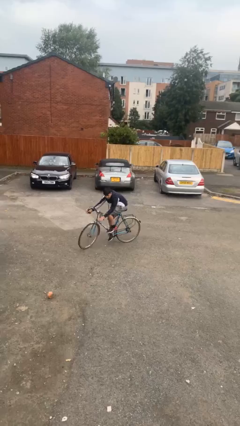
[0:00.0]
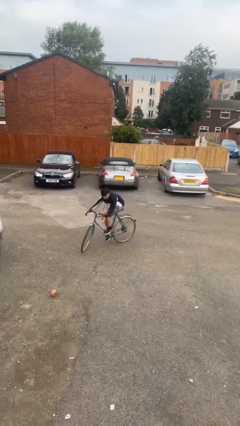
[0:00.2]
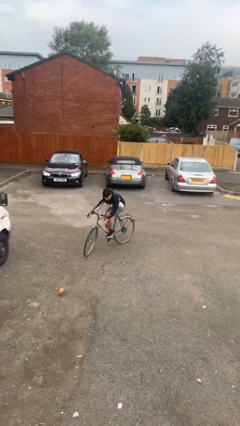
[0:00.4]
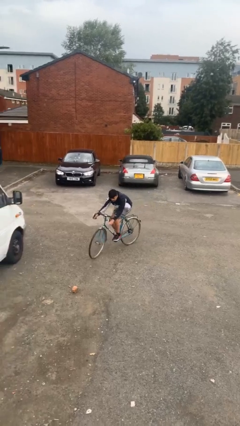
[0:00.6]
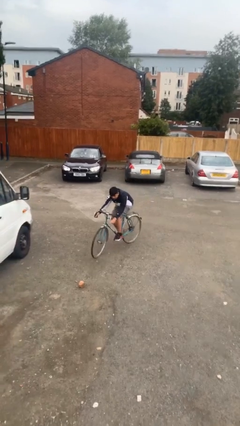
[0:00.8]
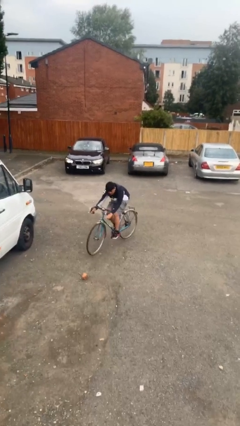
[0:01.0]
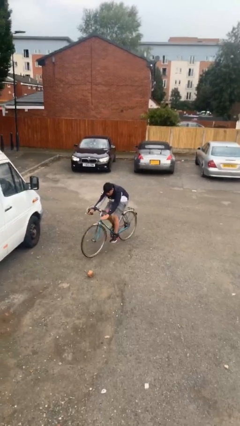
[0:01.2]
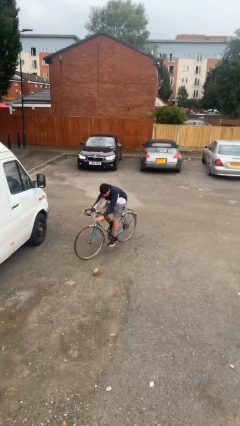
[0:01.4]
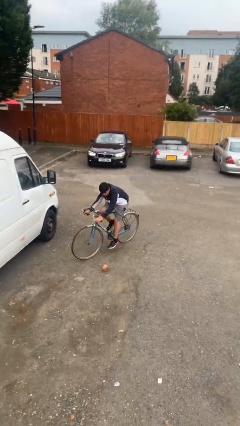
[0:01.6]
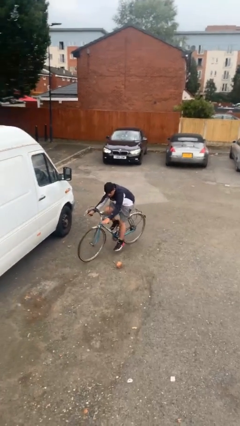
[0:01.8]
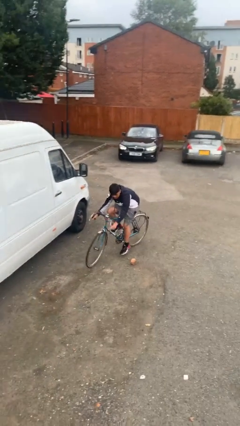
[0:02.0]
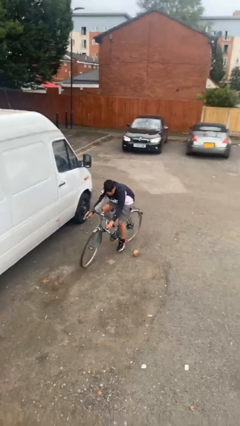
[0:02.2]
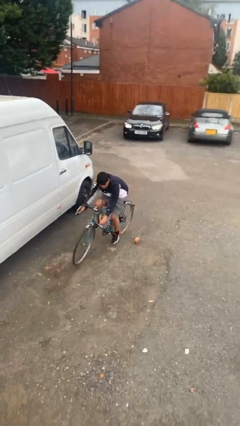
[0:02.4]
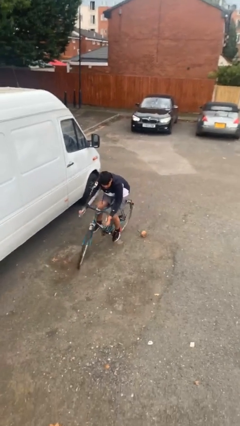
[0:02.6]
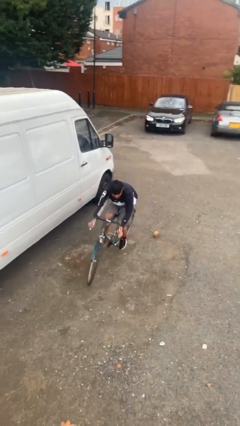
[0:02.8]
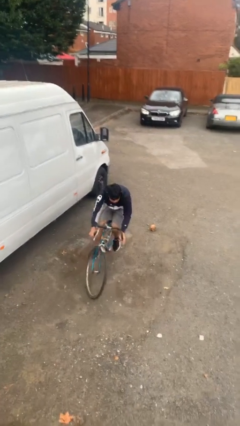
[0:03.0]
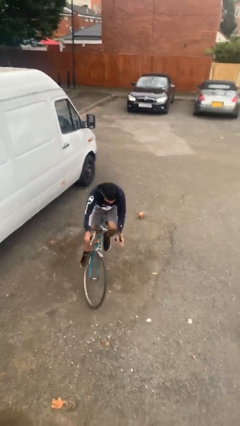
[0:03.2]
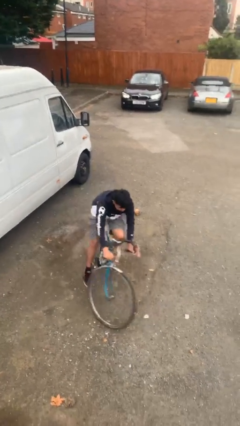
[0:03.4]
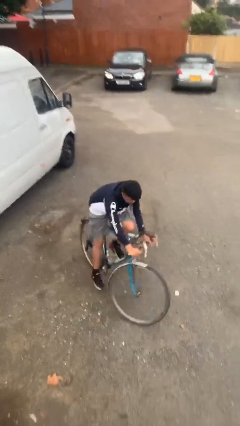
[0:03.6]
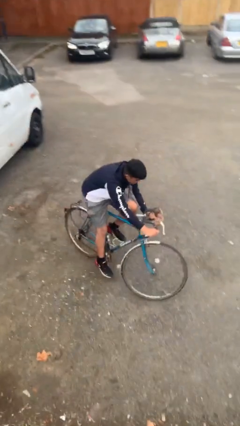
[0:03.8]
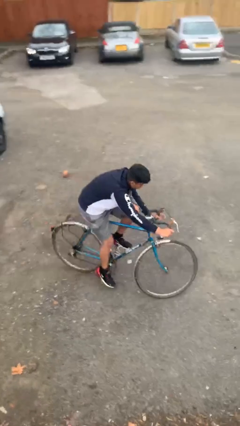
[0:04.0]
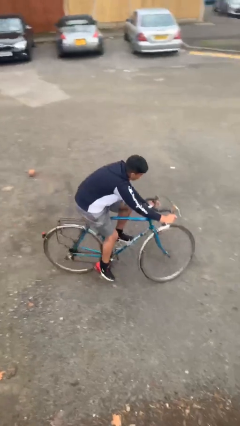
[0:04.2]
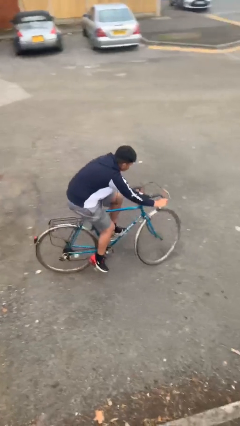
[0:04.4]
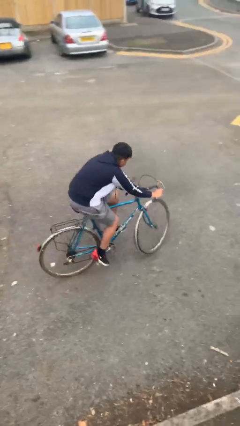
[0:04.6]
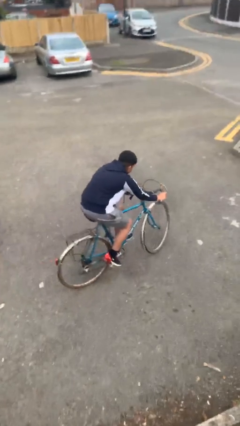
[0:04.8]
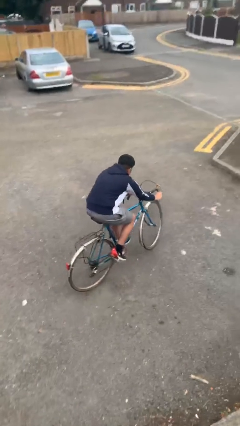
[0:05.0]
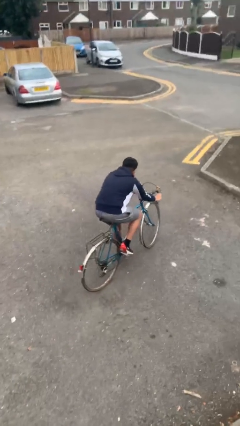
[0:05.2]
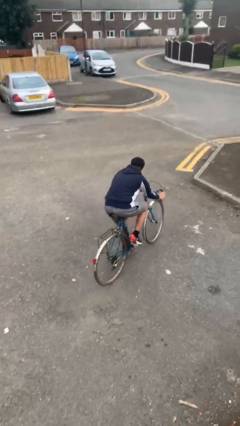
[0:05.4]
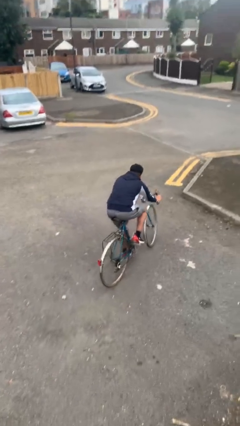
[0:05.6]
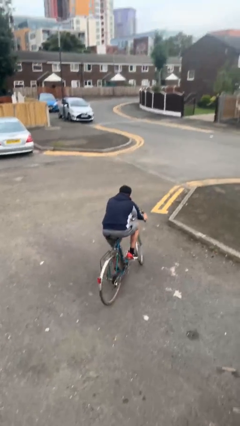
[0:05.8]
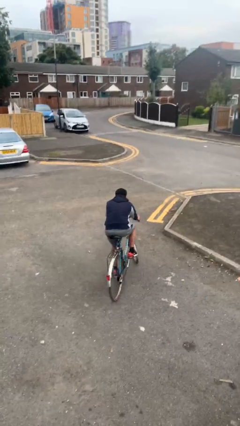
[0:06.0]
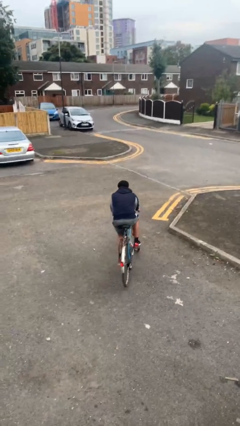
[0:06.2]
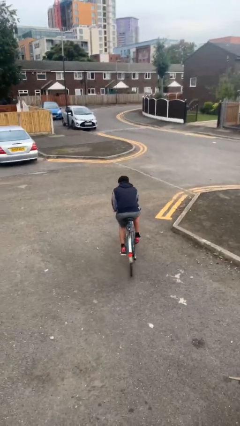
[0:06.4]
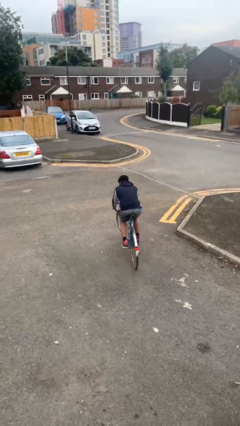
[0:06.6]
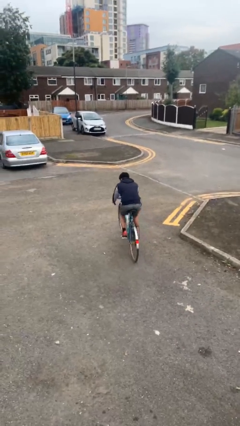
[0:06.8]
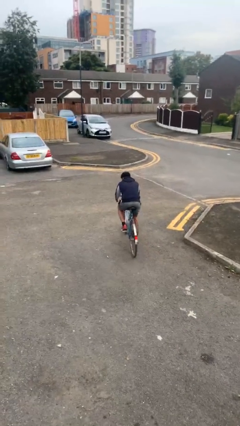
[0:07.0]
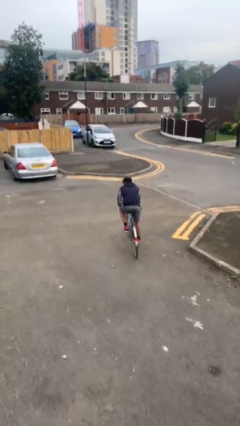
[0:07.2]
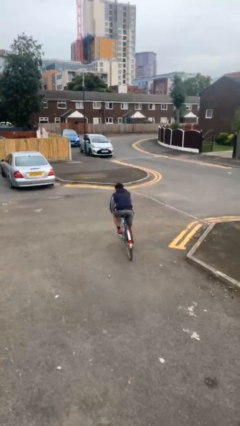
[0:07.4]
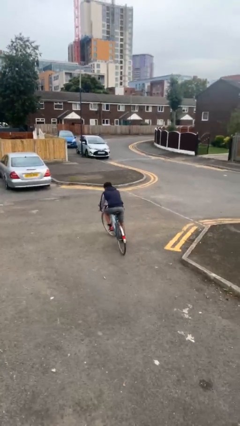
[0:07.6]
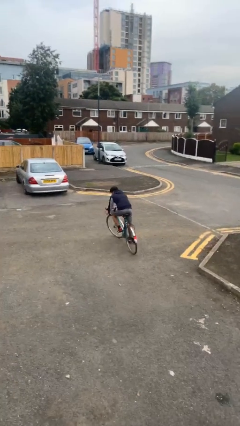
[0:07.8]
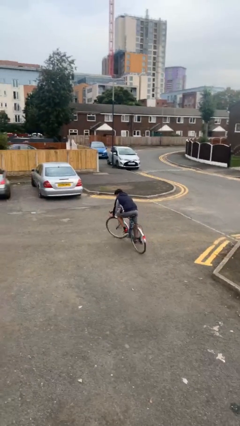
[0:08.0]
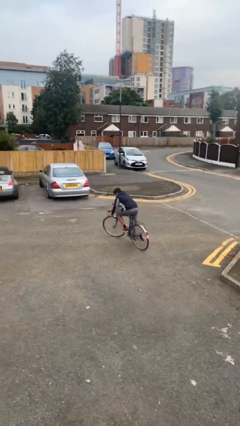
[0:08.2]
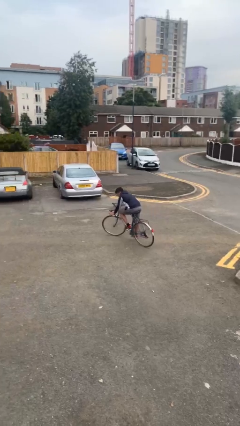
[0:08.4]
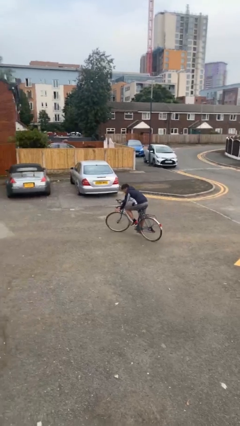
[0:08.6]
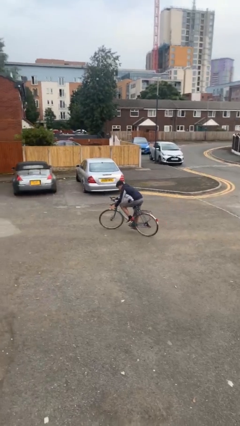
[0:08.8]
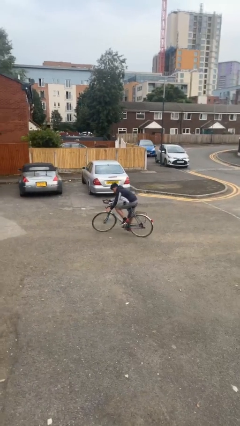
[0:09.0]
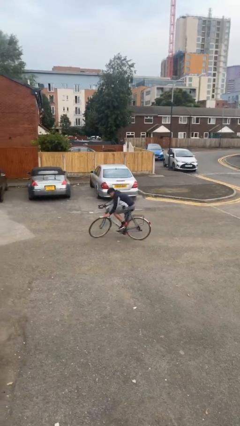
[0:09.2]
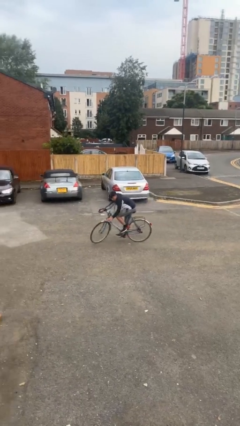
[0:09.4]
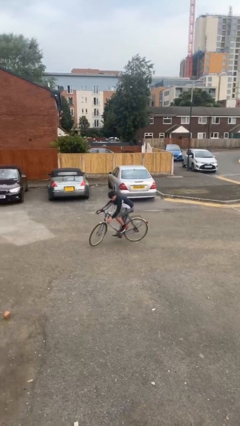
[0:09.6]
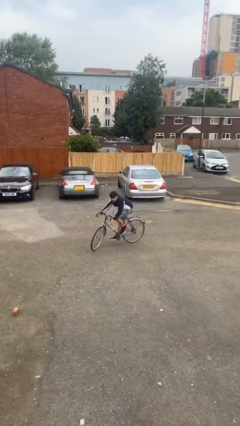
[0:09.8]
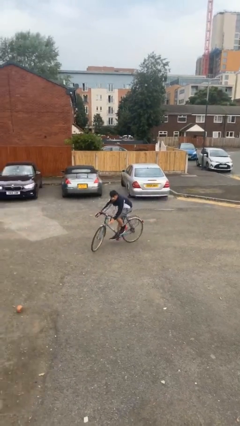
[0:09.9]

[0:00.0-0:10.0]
person rides bicycle

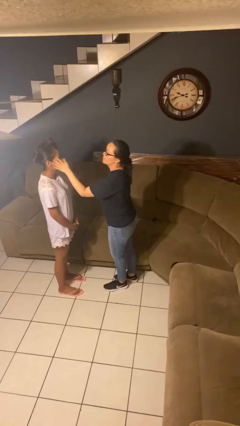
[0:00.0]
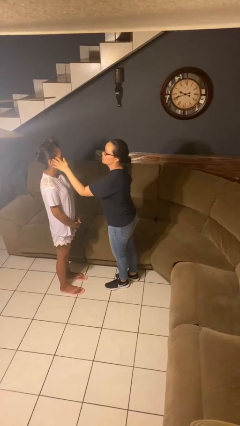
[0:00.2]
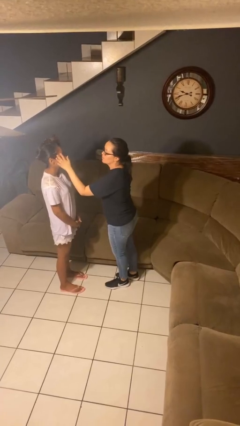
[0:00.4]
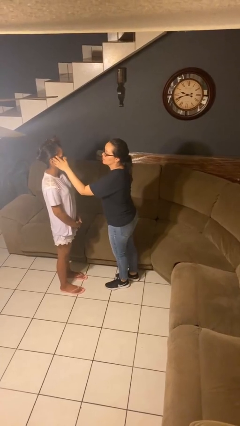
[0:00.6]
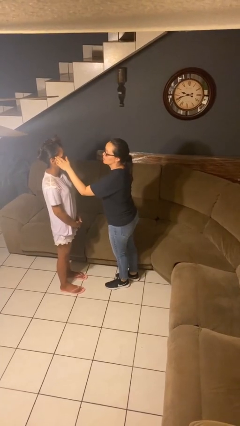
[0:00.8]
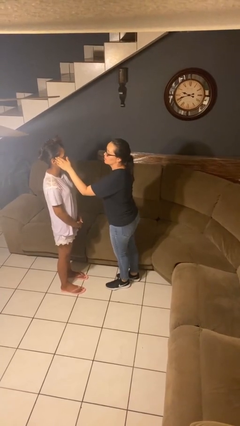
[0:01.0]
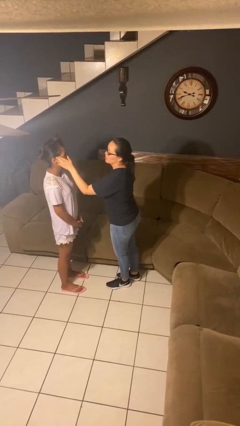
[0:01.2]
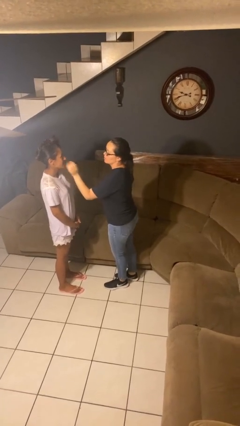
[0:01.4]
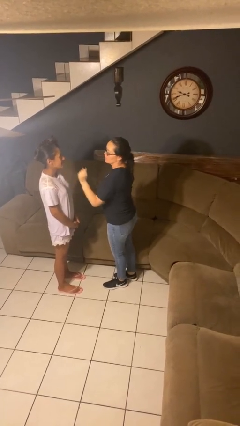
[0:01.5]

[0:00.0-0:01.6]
person touches face of person

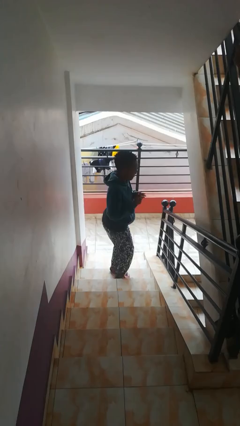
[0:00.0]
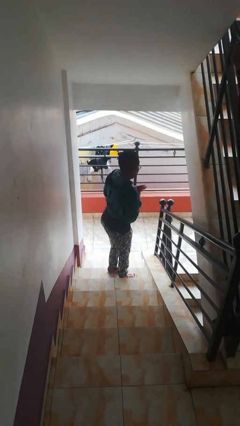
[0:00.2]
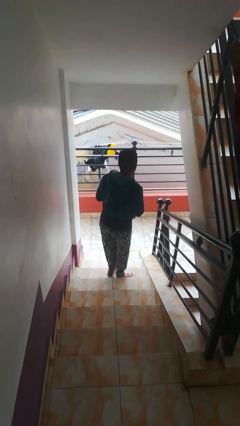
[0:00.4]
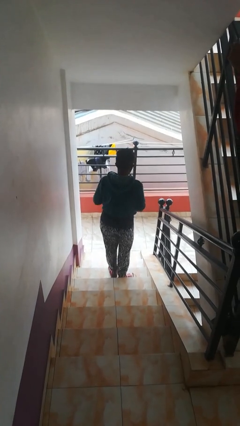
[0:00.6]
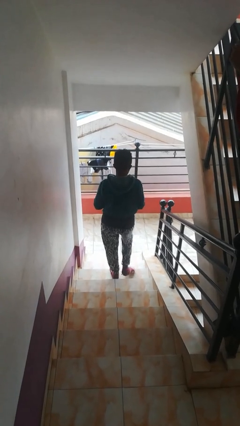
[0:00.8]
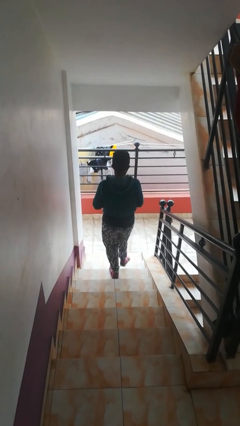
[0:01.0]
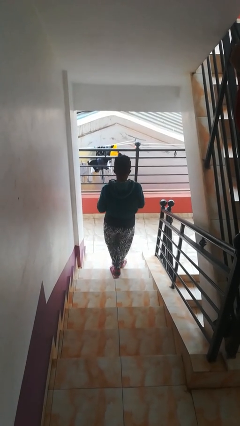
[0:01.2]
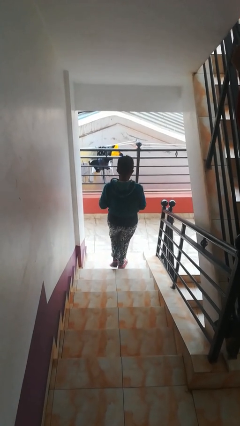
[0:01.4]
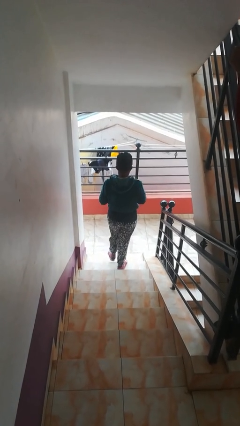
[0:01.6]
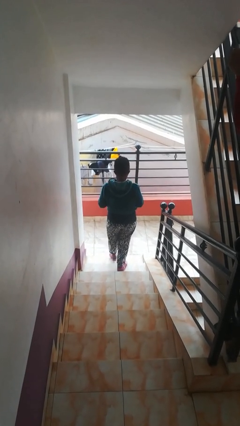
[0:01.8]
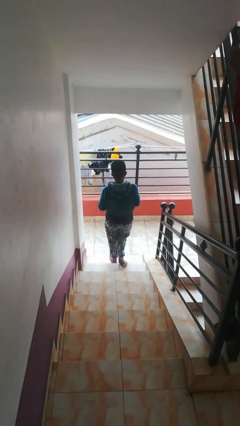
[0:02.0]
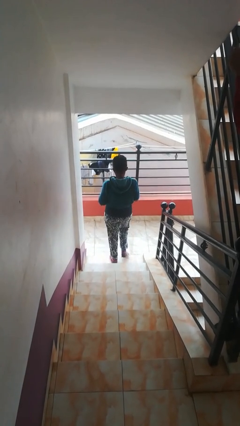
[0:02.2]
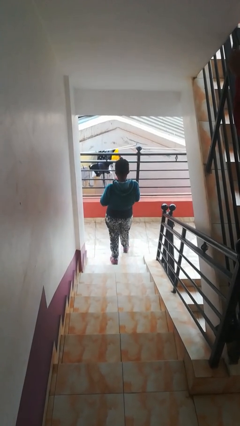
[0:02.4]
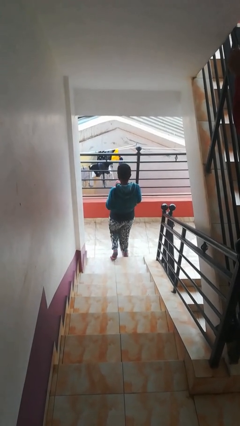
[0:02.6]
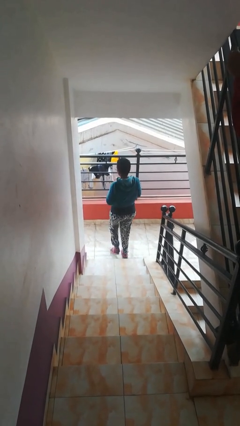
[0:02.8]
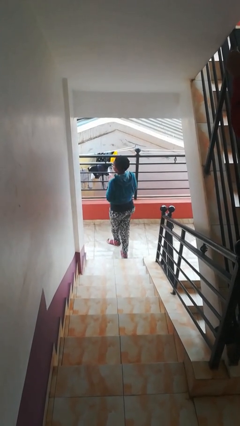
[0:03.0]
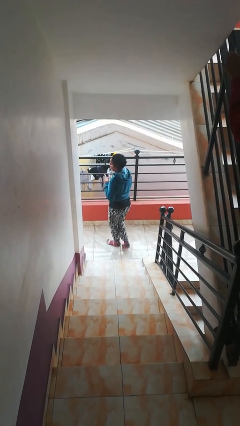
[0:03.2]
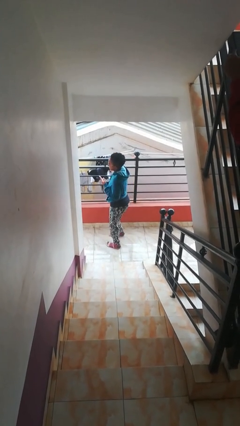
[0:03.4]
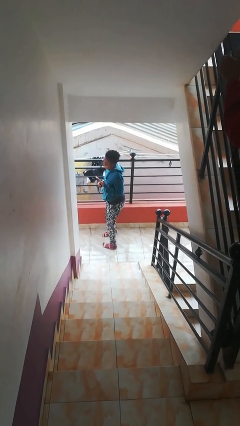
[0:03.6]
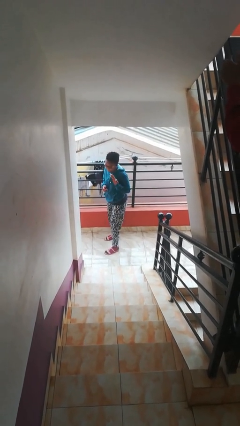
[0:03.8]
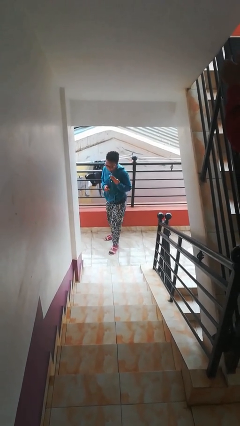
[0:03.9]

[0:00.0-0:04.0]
person climbs down stairs

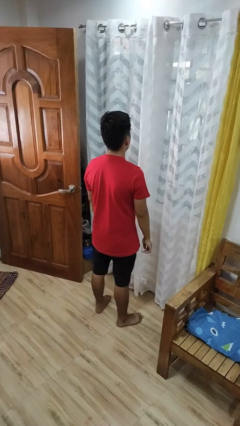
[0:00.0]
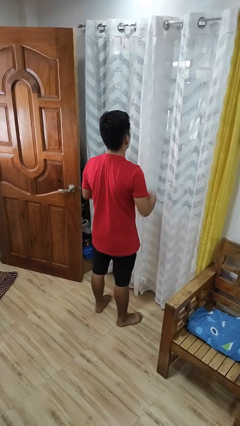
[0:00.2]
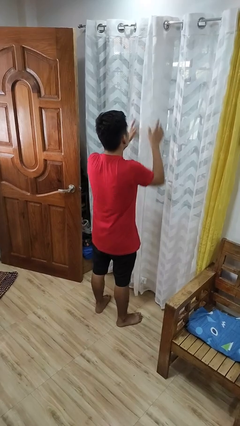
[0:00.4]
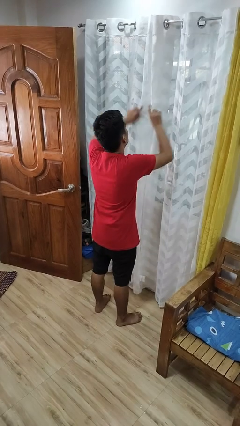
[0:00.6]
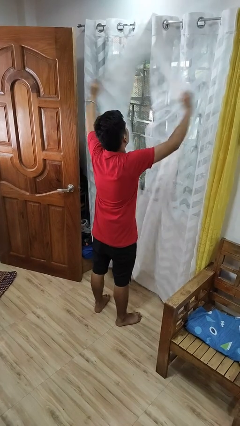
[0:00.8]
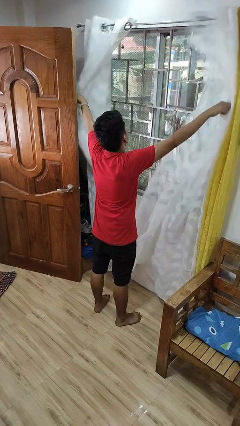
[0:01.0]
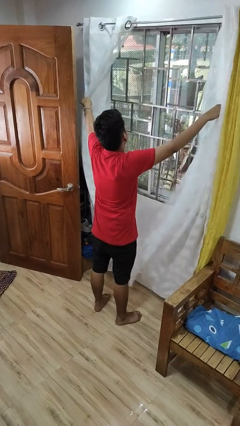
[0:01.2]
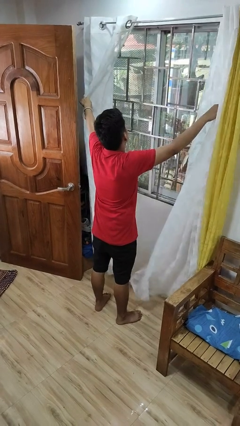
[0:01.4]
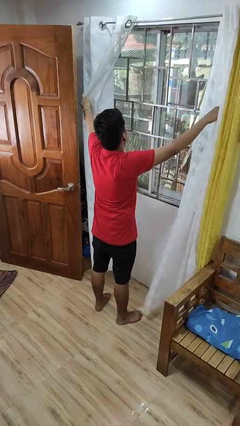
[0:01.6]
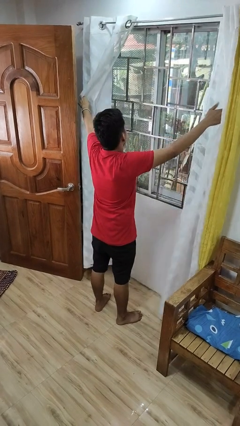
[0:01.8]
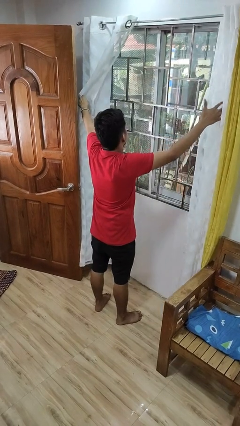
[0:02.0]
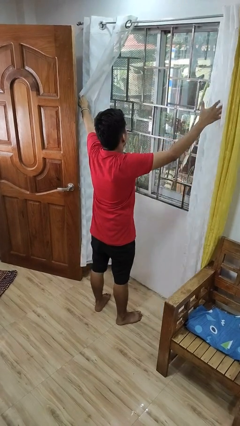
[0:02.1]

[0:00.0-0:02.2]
person opens curtains
